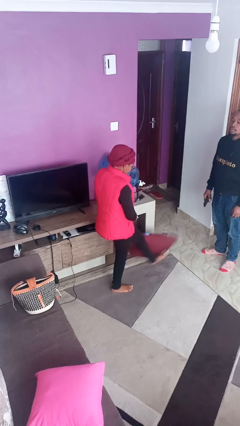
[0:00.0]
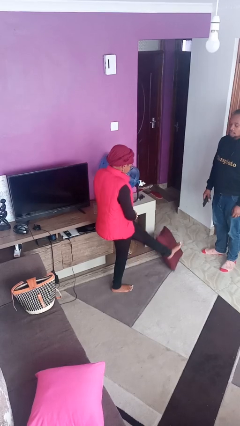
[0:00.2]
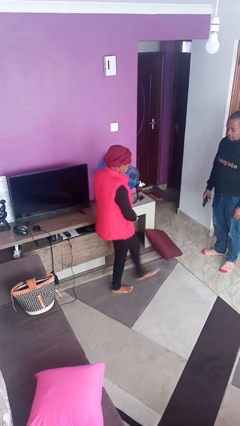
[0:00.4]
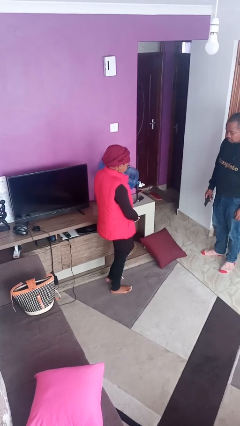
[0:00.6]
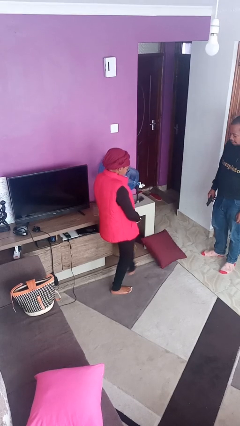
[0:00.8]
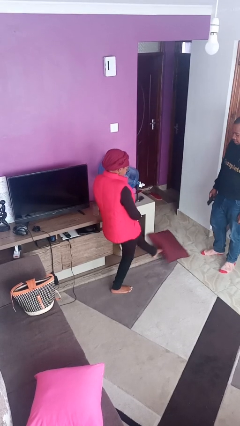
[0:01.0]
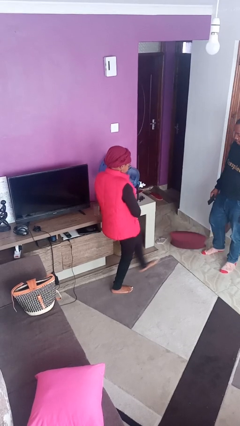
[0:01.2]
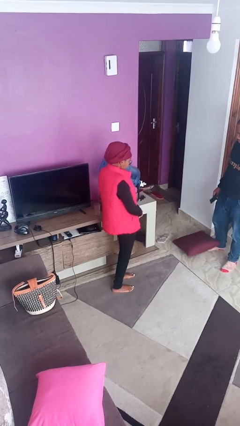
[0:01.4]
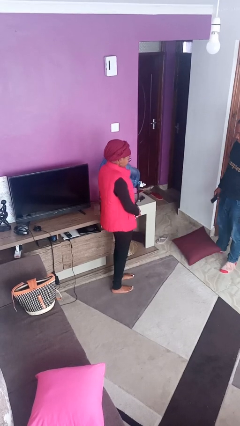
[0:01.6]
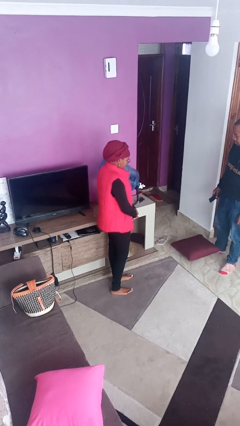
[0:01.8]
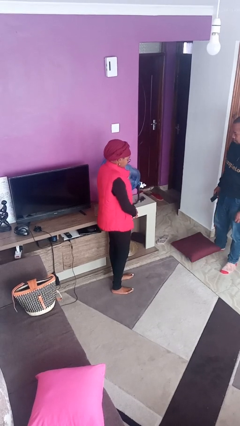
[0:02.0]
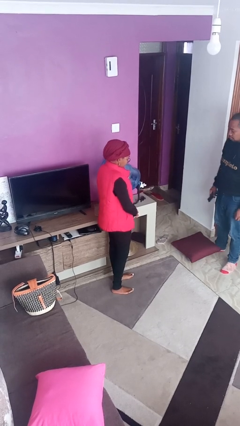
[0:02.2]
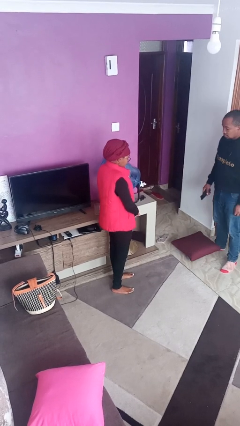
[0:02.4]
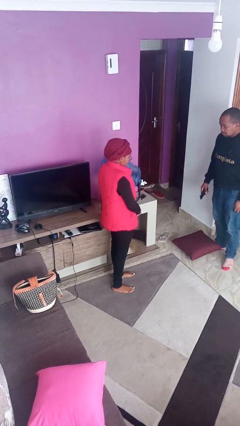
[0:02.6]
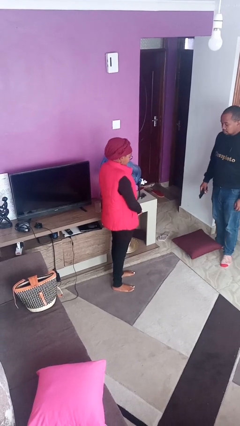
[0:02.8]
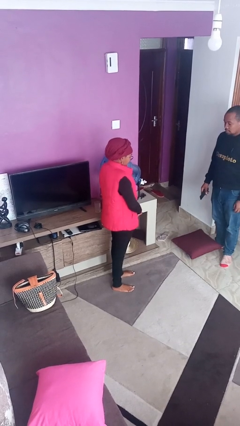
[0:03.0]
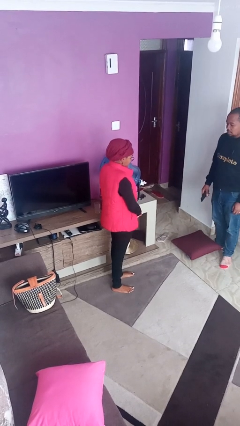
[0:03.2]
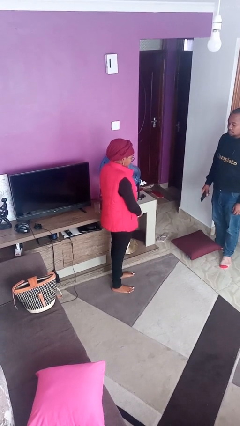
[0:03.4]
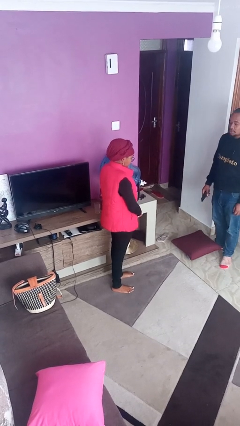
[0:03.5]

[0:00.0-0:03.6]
person kicks object to person

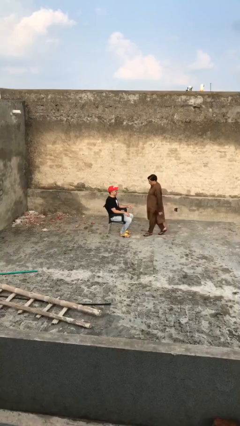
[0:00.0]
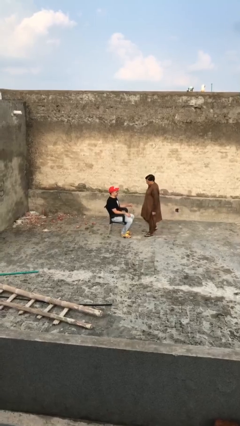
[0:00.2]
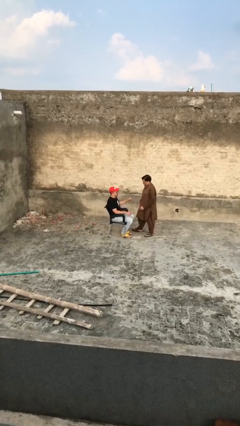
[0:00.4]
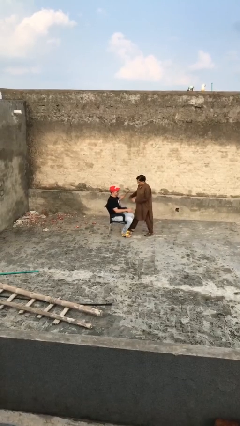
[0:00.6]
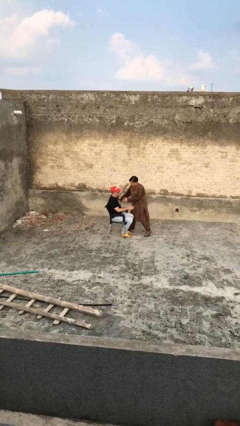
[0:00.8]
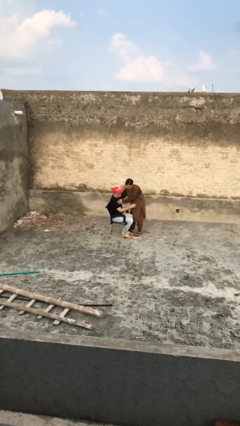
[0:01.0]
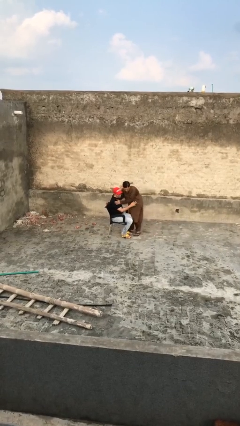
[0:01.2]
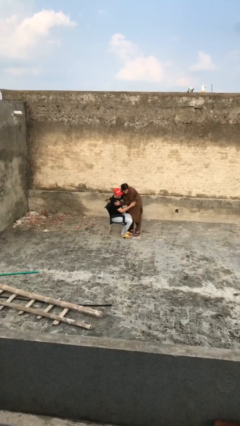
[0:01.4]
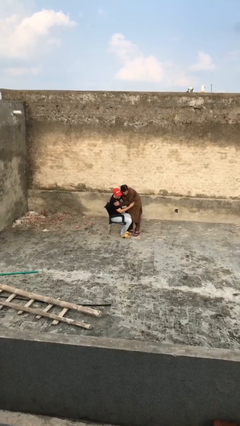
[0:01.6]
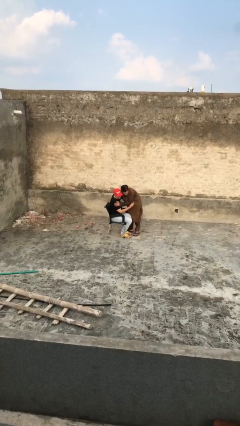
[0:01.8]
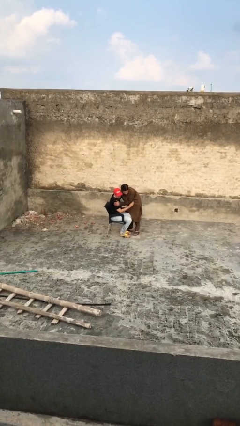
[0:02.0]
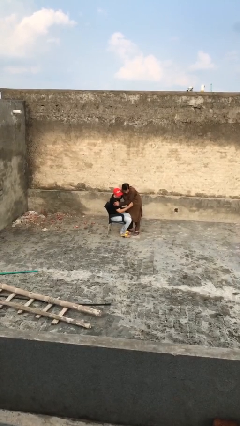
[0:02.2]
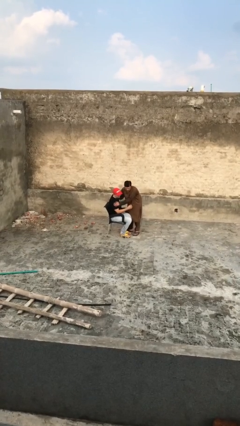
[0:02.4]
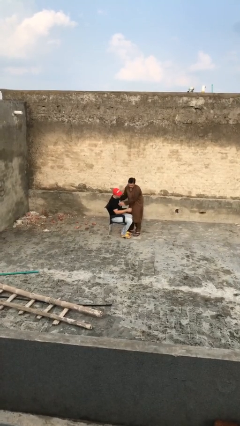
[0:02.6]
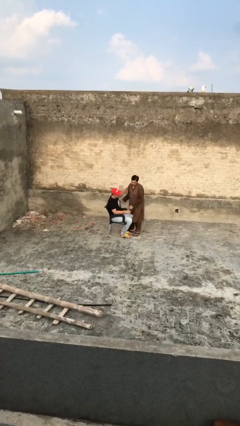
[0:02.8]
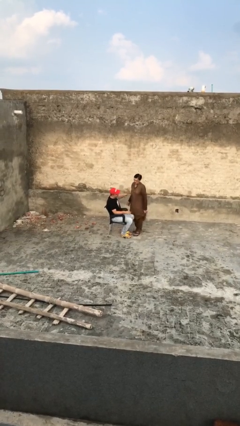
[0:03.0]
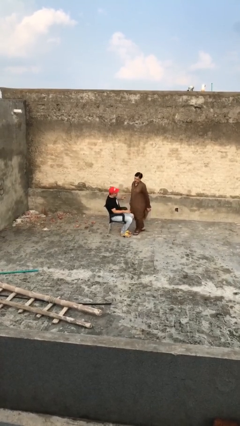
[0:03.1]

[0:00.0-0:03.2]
person embraces person

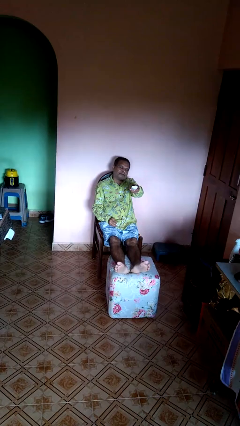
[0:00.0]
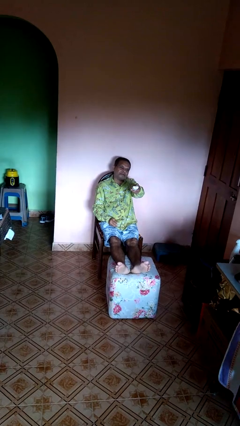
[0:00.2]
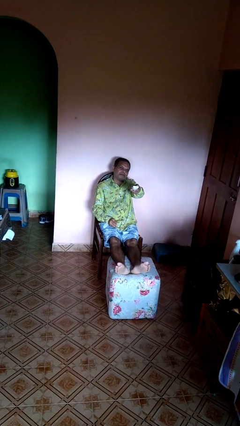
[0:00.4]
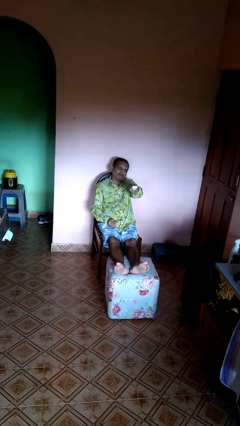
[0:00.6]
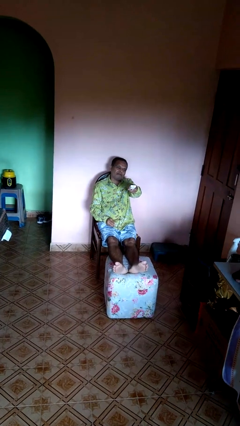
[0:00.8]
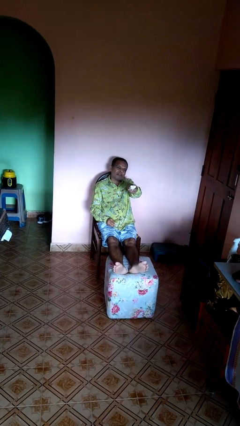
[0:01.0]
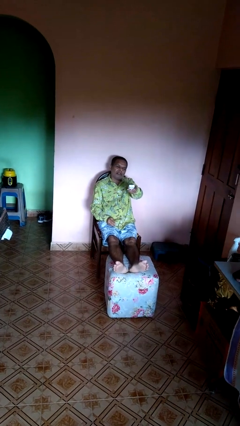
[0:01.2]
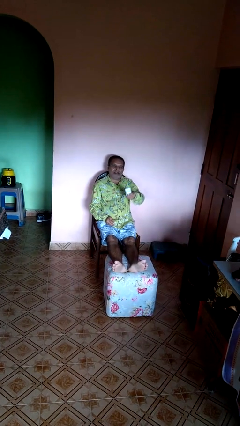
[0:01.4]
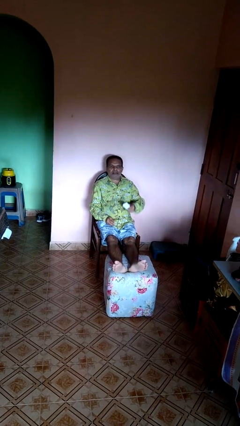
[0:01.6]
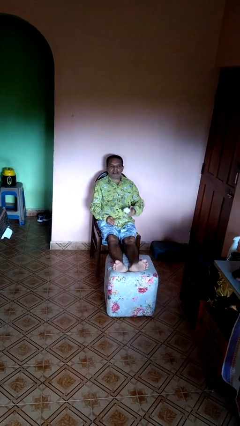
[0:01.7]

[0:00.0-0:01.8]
person uses television remote

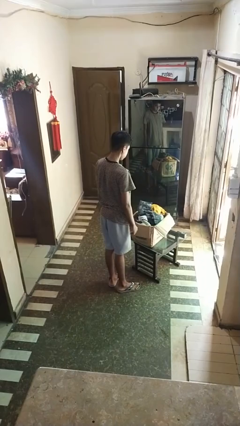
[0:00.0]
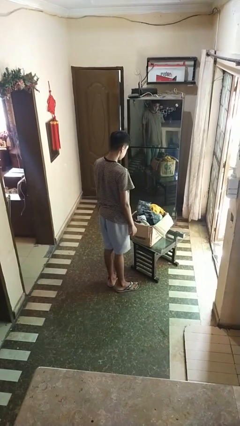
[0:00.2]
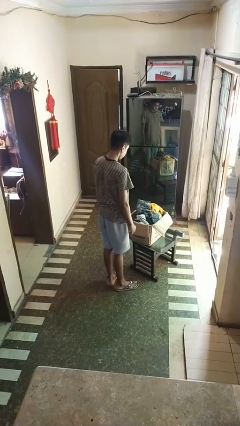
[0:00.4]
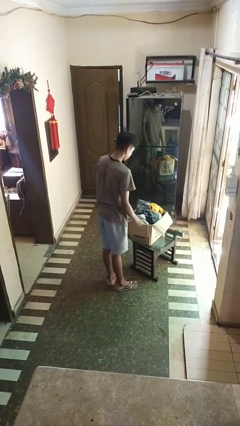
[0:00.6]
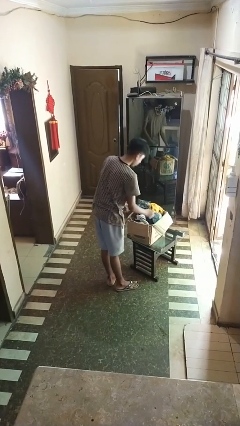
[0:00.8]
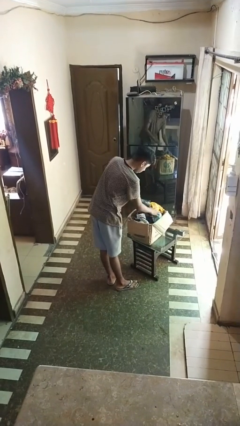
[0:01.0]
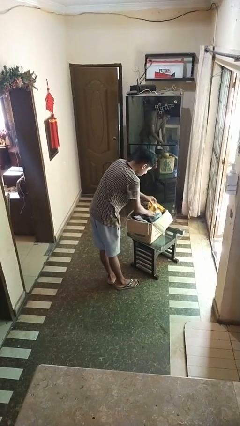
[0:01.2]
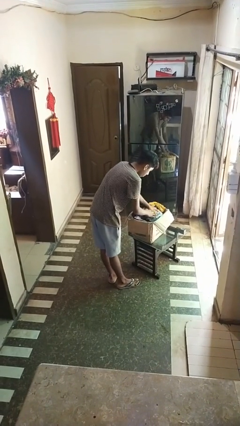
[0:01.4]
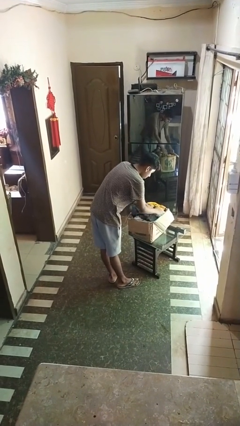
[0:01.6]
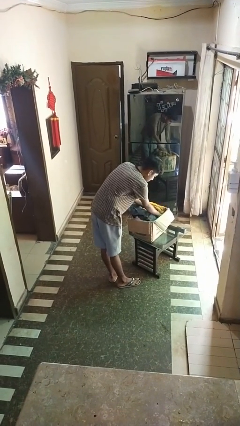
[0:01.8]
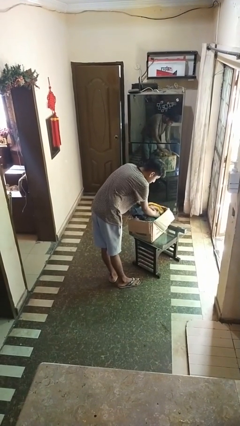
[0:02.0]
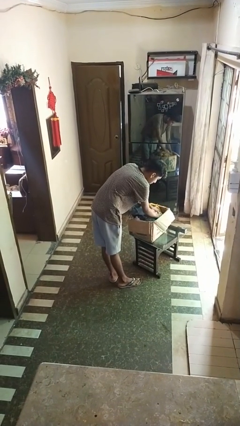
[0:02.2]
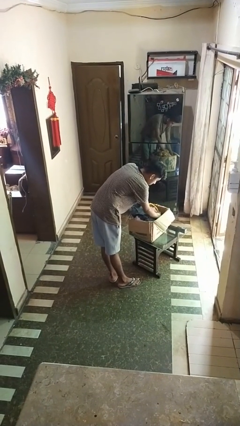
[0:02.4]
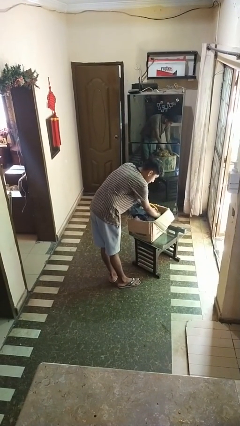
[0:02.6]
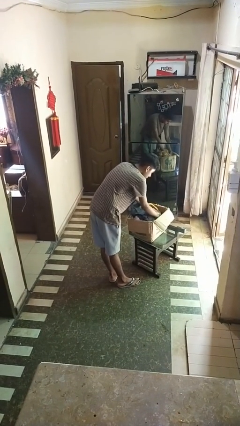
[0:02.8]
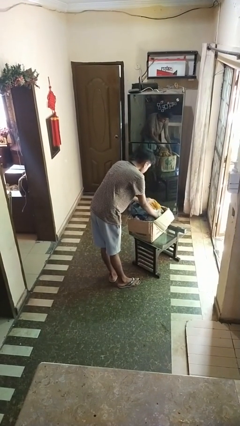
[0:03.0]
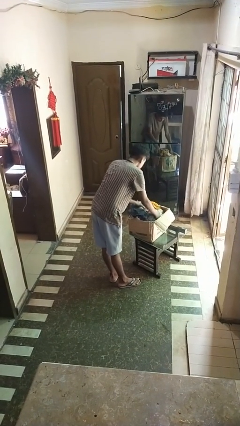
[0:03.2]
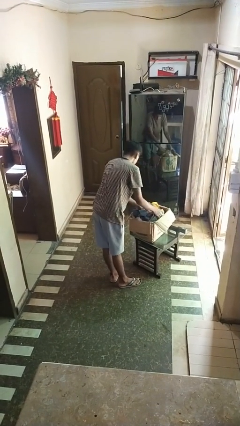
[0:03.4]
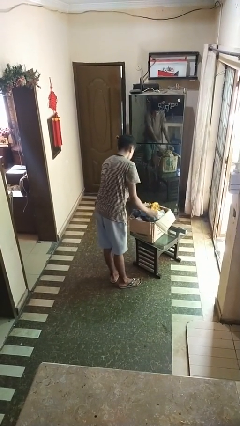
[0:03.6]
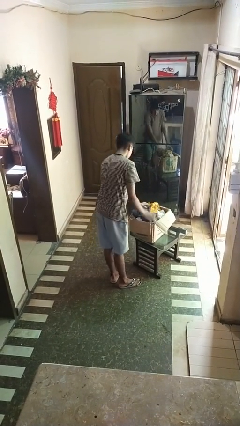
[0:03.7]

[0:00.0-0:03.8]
person searches in box

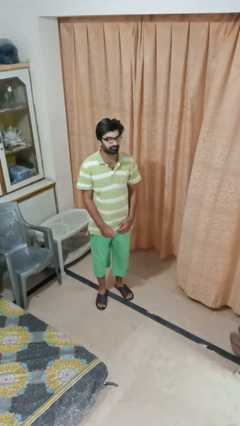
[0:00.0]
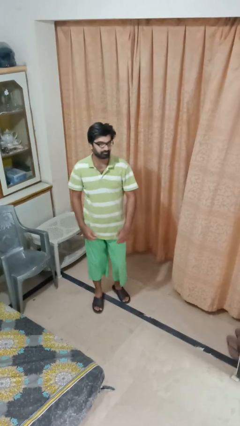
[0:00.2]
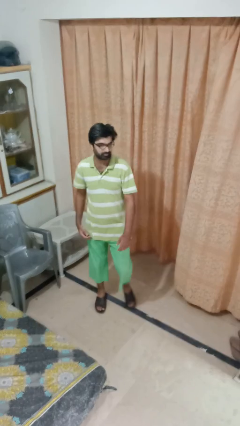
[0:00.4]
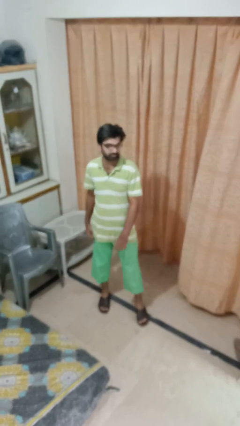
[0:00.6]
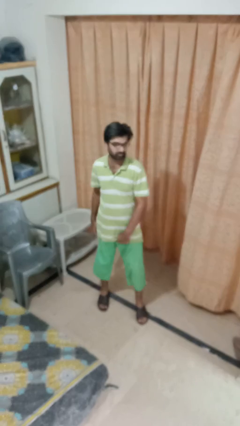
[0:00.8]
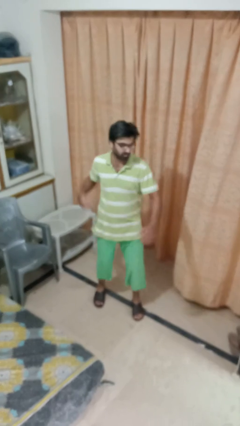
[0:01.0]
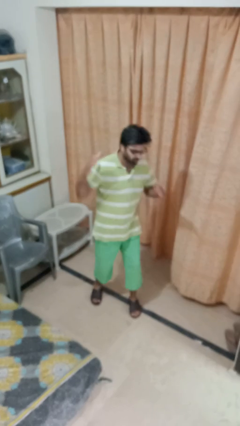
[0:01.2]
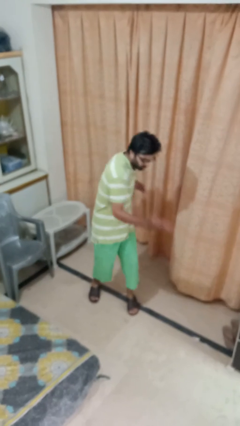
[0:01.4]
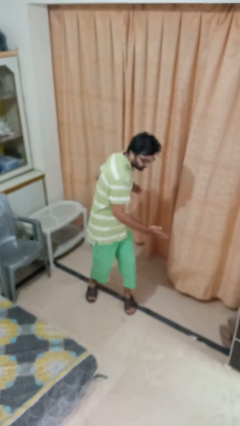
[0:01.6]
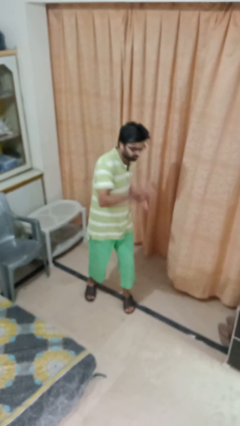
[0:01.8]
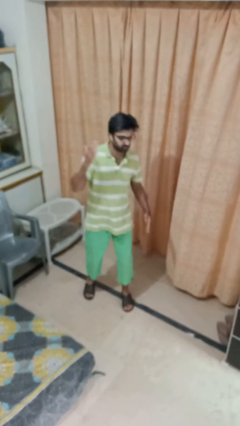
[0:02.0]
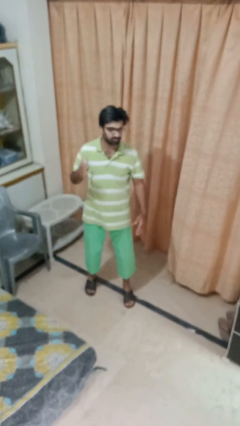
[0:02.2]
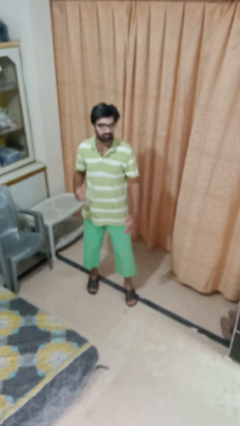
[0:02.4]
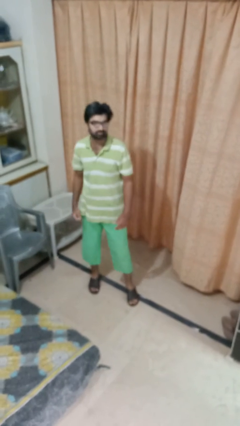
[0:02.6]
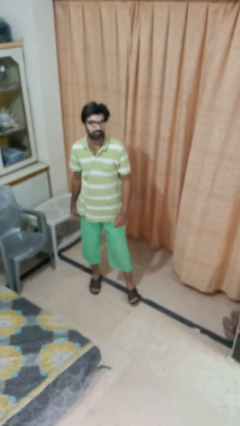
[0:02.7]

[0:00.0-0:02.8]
person karate chop

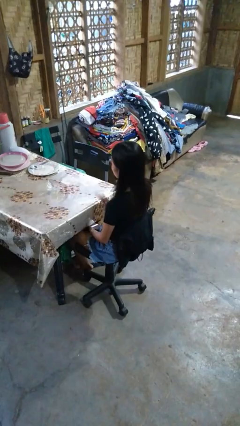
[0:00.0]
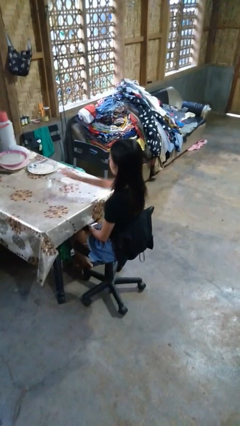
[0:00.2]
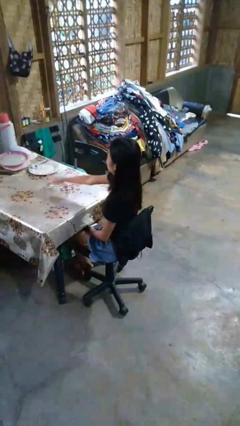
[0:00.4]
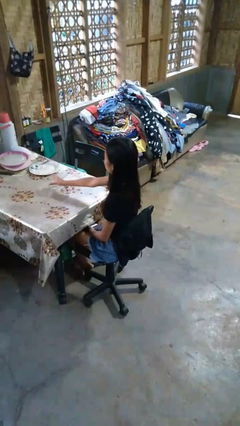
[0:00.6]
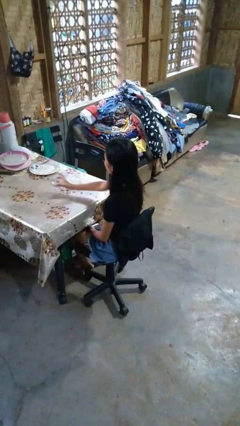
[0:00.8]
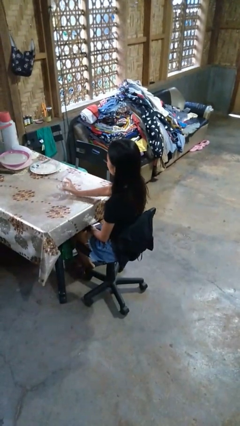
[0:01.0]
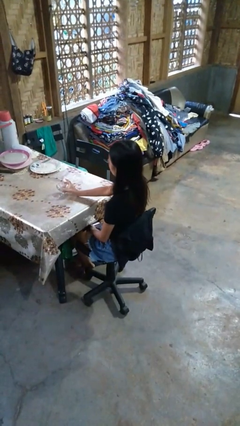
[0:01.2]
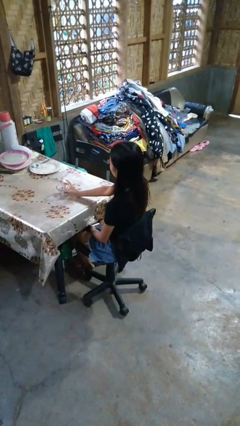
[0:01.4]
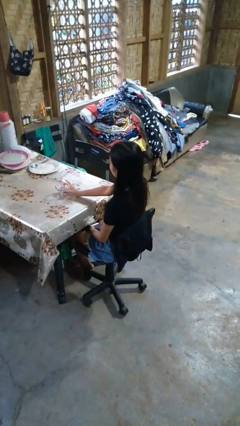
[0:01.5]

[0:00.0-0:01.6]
person sets upright glass

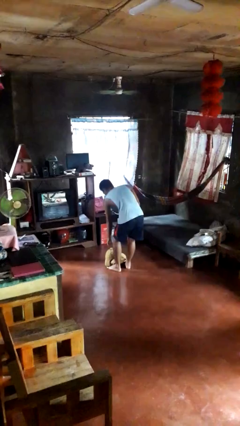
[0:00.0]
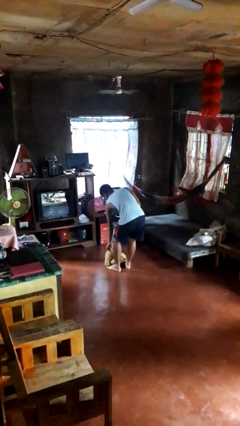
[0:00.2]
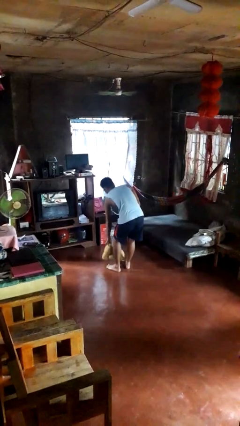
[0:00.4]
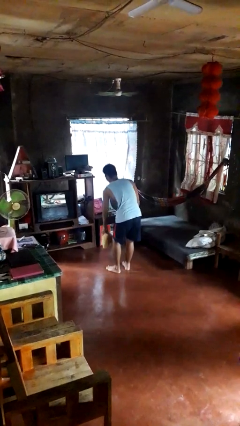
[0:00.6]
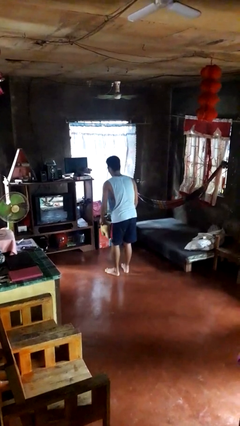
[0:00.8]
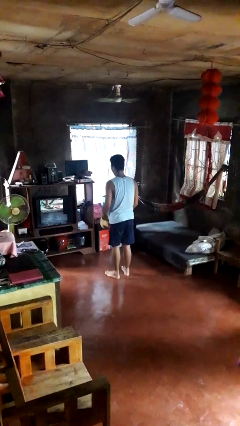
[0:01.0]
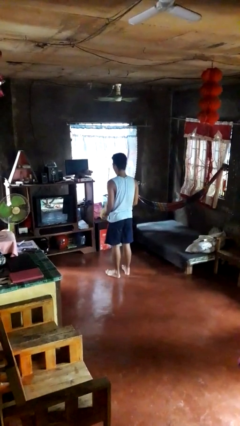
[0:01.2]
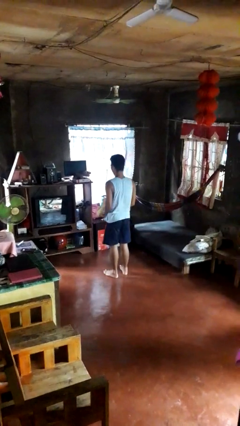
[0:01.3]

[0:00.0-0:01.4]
person picks up object from floor
